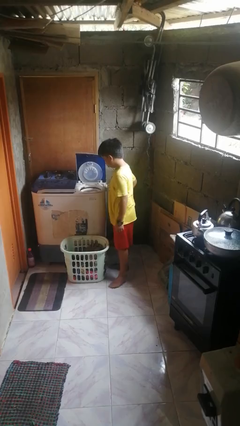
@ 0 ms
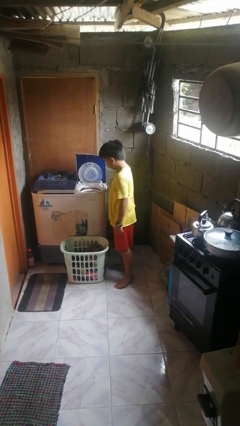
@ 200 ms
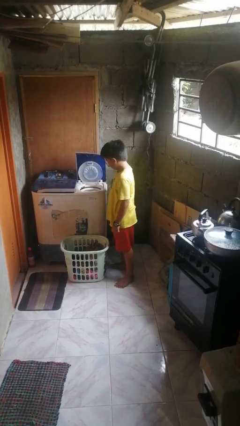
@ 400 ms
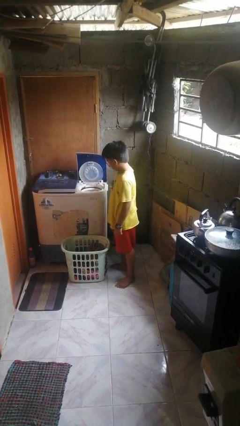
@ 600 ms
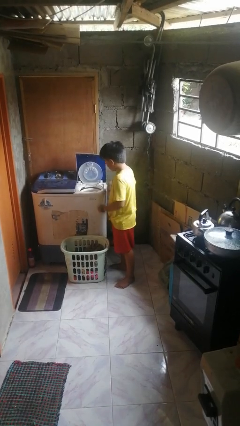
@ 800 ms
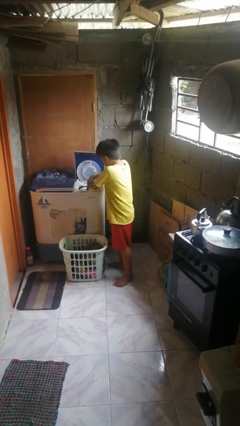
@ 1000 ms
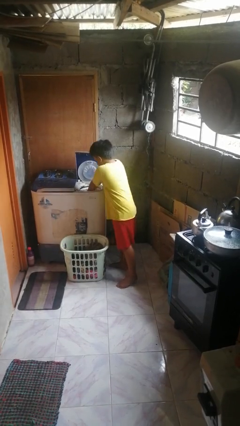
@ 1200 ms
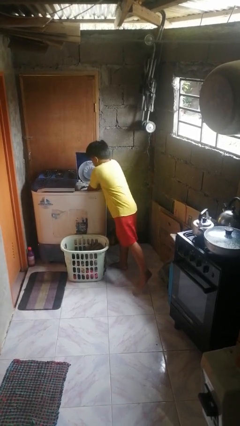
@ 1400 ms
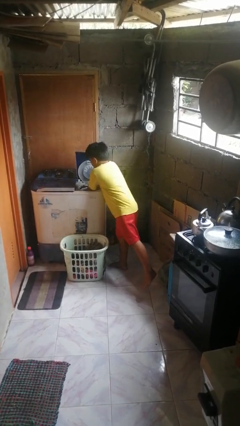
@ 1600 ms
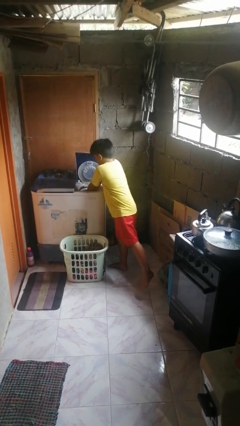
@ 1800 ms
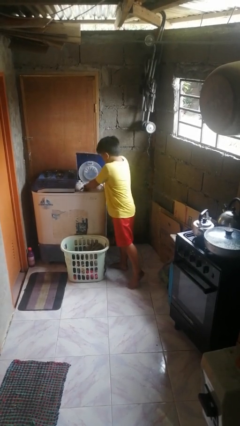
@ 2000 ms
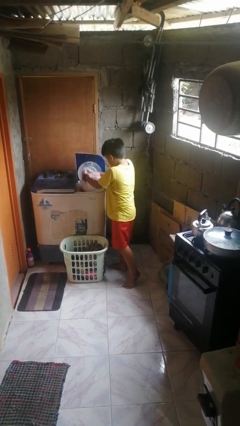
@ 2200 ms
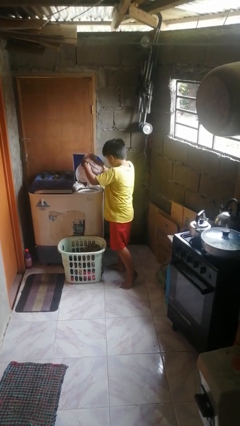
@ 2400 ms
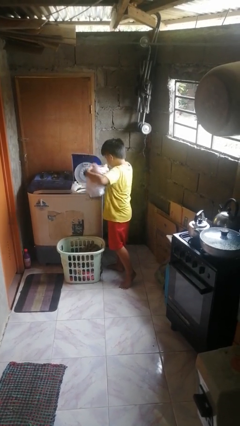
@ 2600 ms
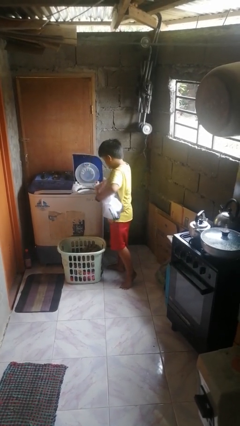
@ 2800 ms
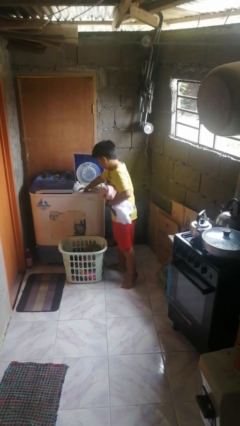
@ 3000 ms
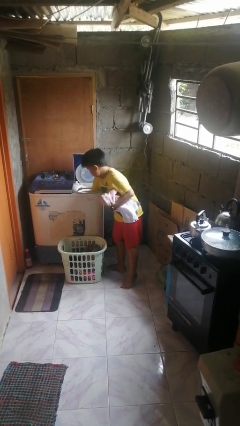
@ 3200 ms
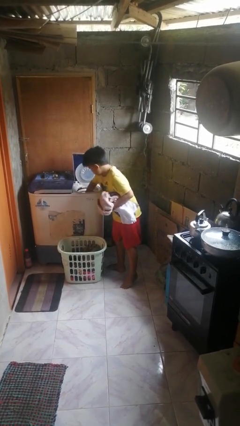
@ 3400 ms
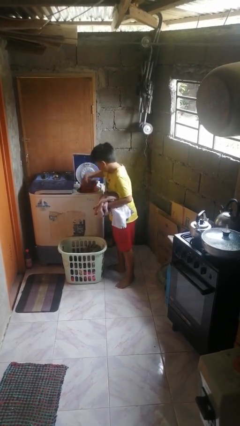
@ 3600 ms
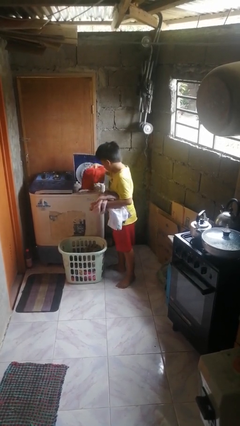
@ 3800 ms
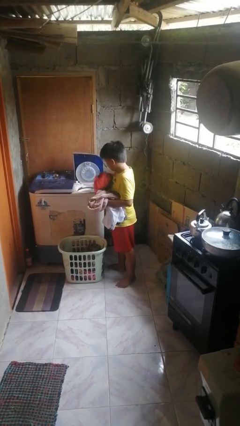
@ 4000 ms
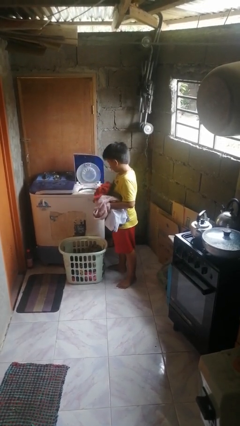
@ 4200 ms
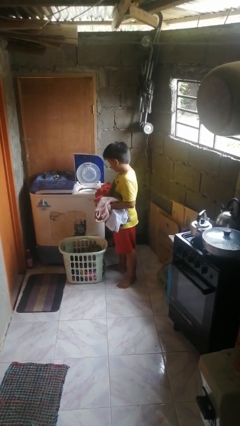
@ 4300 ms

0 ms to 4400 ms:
person unloads dryer

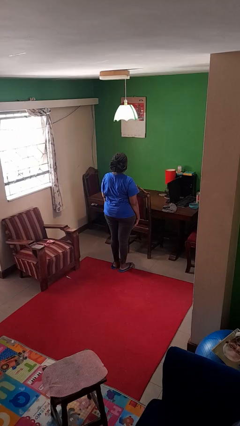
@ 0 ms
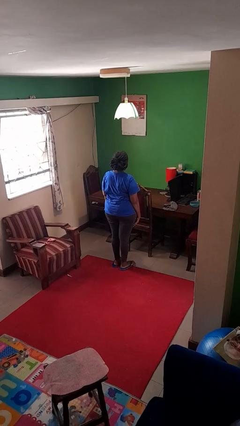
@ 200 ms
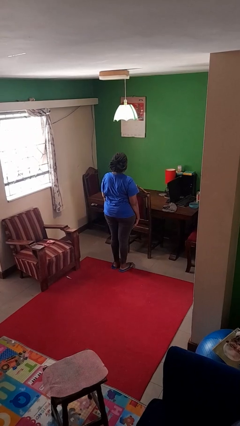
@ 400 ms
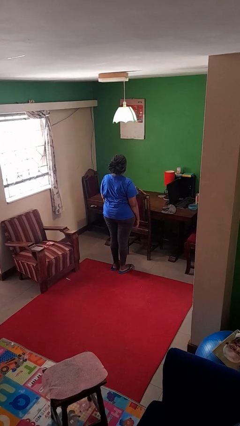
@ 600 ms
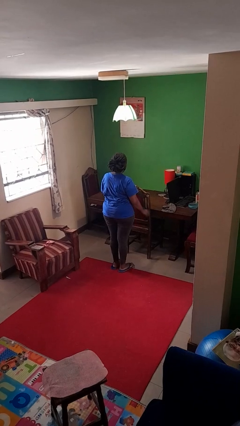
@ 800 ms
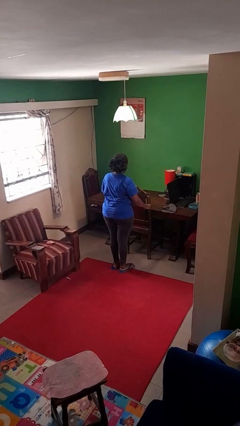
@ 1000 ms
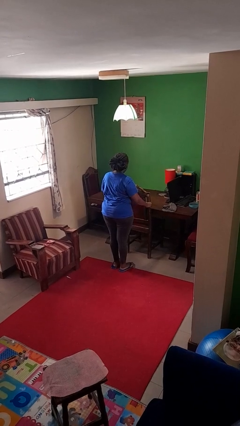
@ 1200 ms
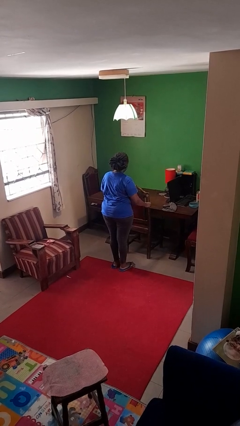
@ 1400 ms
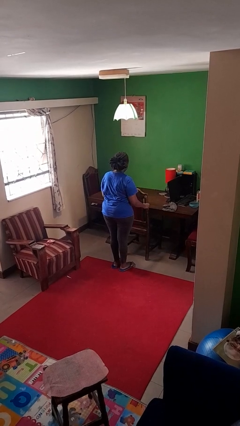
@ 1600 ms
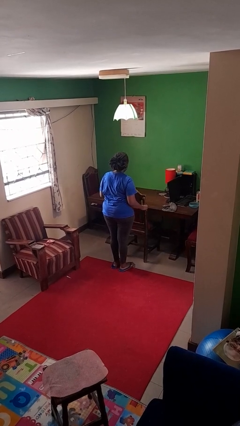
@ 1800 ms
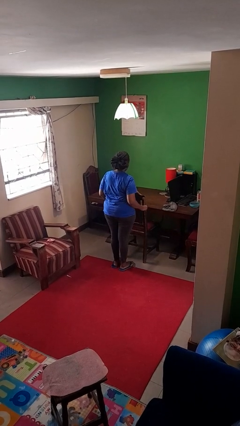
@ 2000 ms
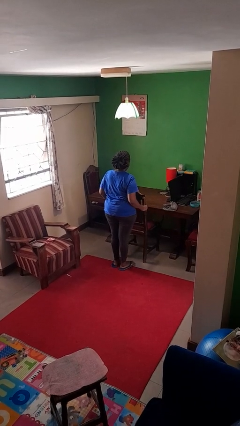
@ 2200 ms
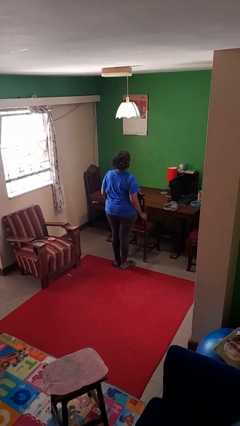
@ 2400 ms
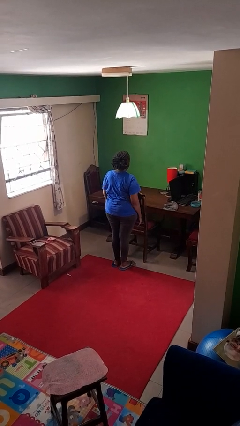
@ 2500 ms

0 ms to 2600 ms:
person pulls out chair

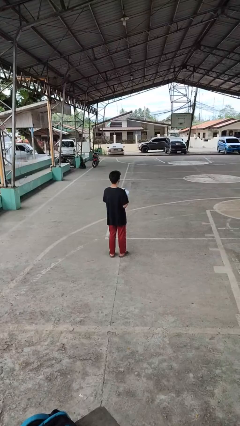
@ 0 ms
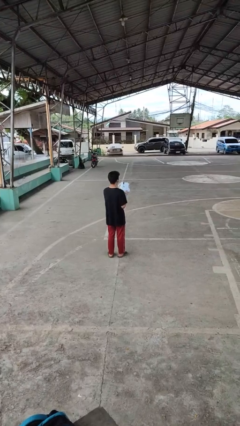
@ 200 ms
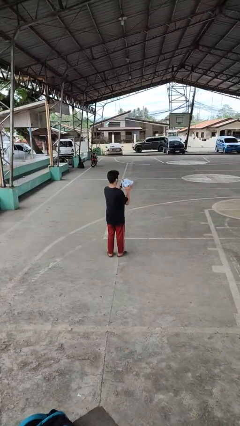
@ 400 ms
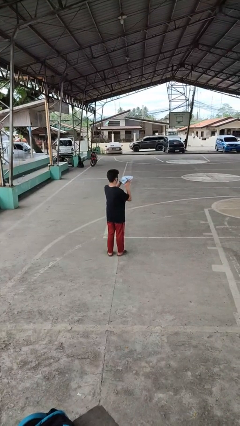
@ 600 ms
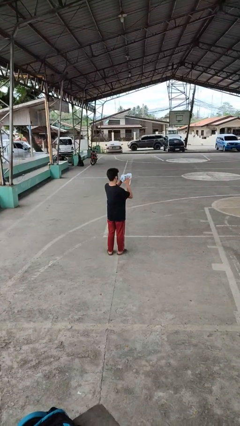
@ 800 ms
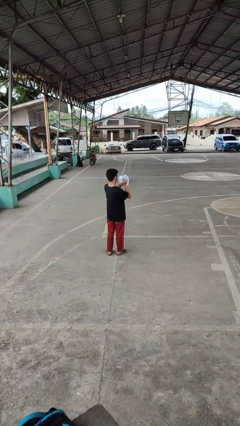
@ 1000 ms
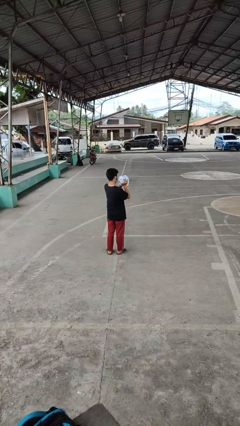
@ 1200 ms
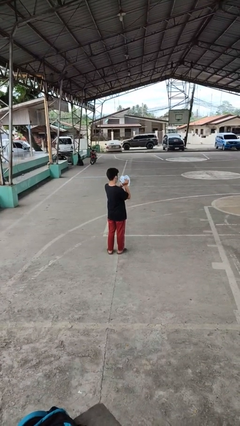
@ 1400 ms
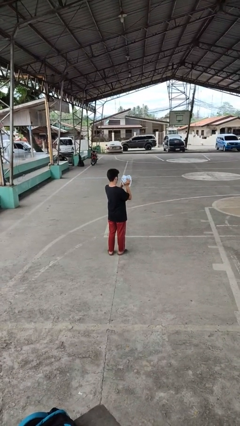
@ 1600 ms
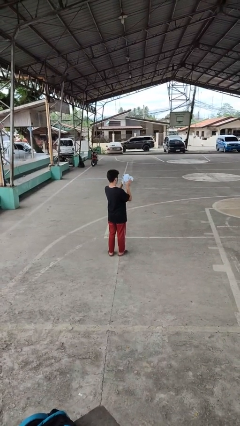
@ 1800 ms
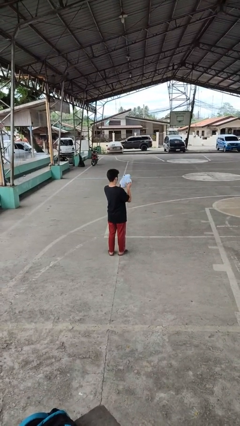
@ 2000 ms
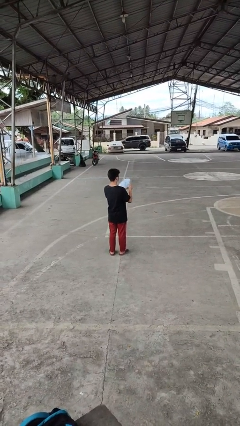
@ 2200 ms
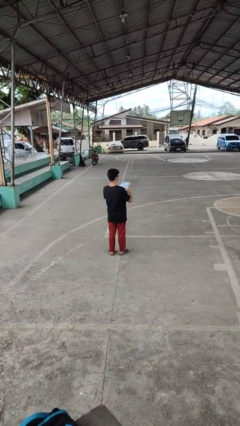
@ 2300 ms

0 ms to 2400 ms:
person squeezes object

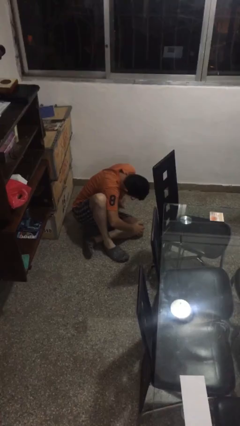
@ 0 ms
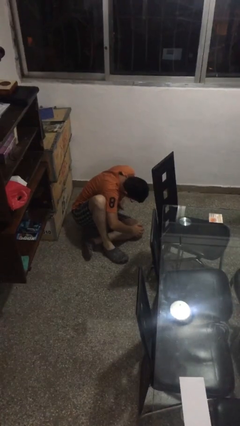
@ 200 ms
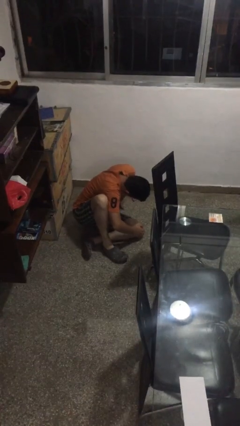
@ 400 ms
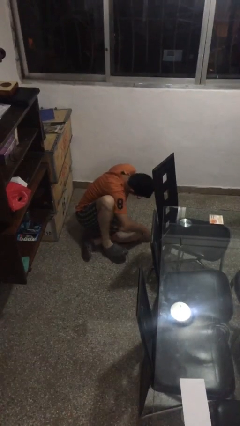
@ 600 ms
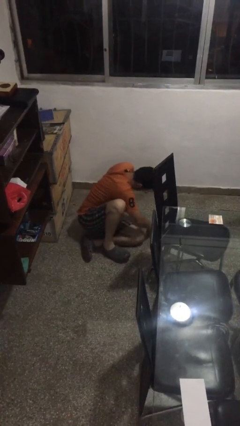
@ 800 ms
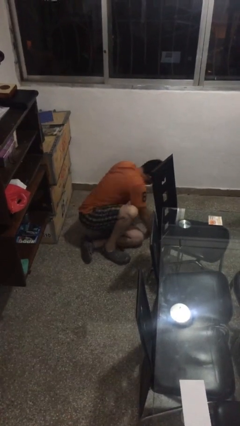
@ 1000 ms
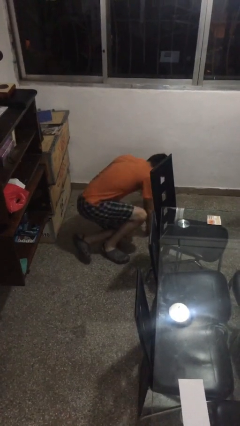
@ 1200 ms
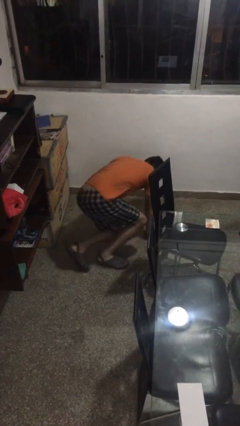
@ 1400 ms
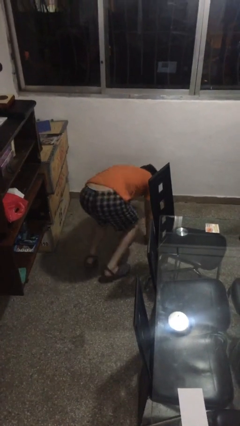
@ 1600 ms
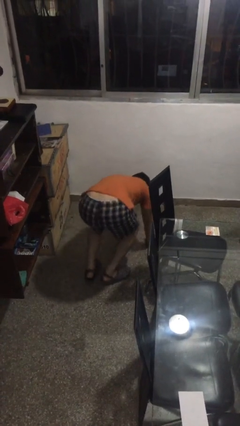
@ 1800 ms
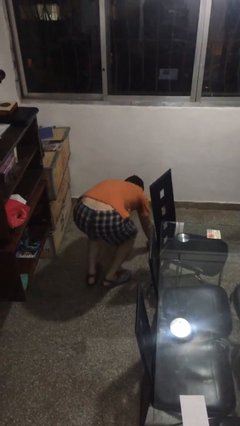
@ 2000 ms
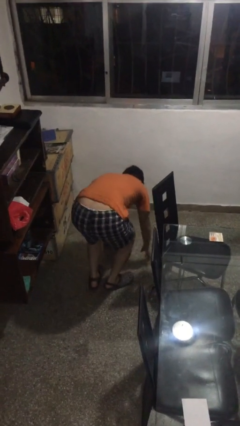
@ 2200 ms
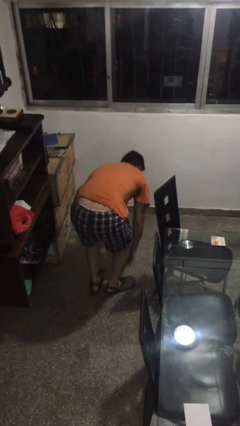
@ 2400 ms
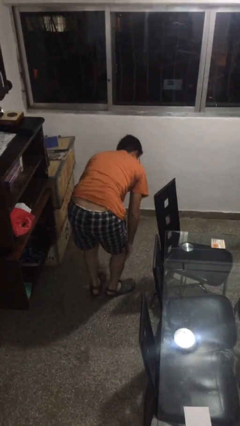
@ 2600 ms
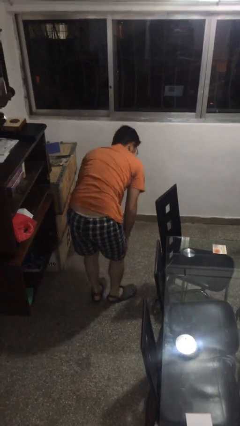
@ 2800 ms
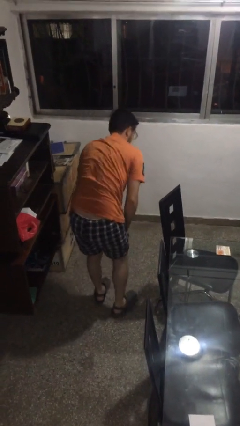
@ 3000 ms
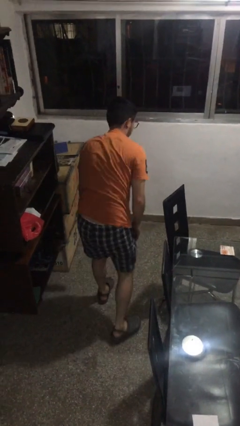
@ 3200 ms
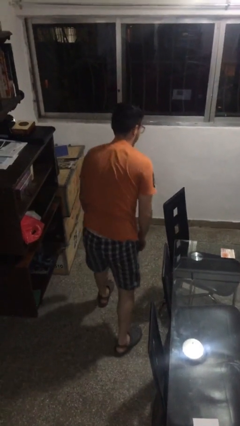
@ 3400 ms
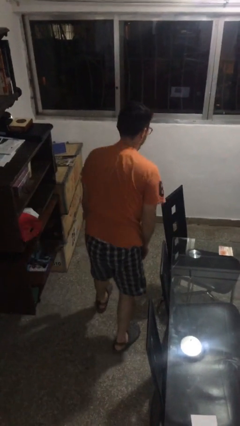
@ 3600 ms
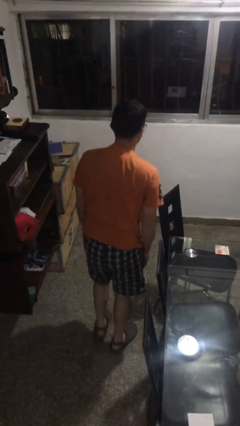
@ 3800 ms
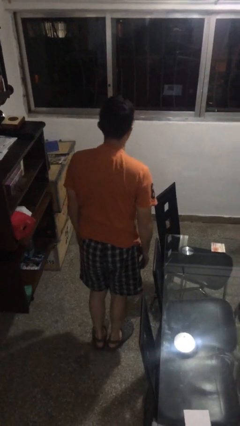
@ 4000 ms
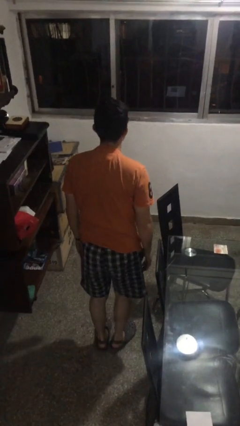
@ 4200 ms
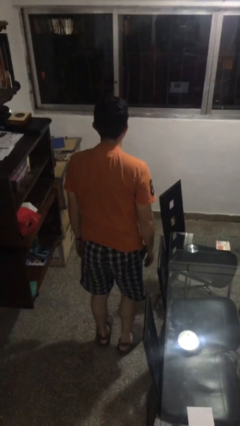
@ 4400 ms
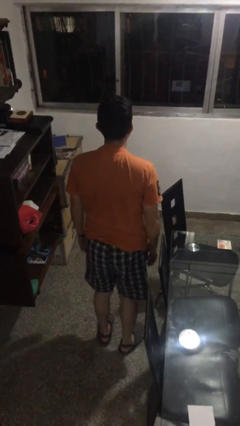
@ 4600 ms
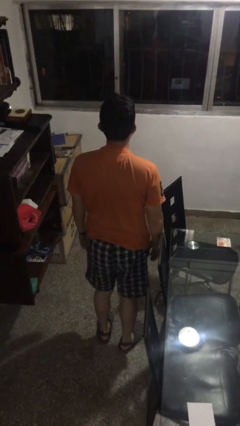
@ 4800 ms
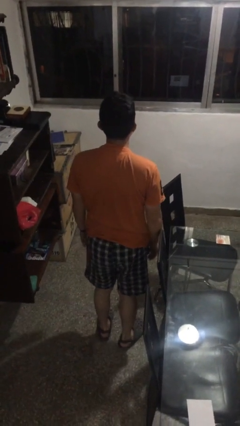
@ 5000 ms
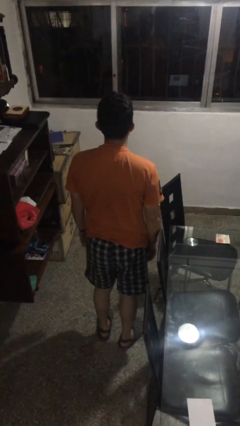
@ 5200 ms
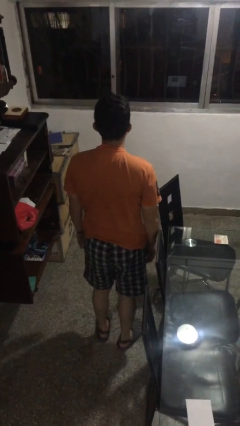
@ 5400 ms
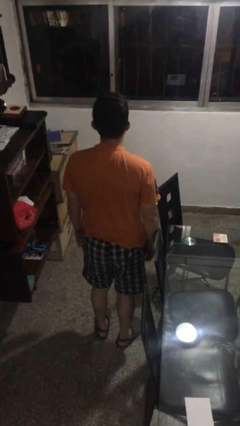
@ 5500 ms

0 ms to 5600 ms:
person stands up from floor

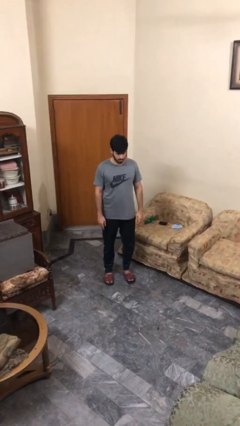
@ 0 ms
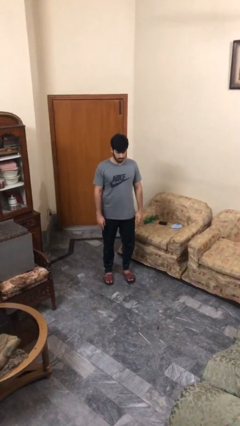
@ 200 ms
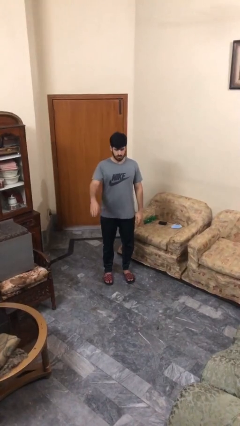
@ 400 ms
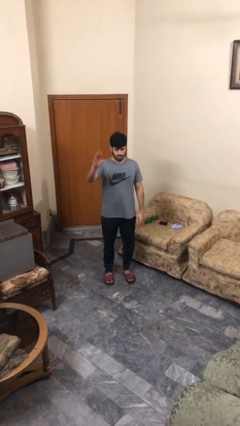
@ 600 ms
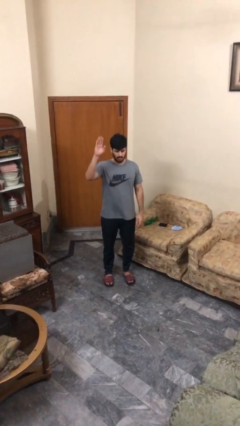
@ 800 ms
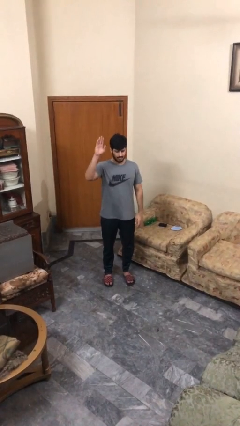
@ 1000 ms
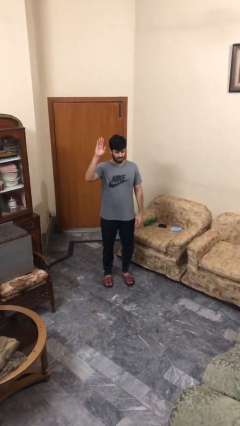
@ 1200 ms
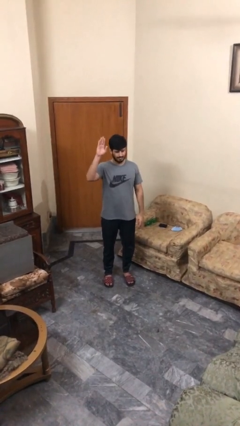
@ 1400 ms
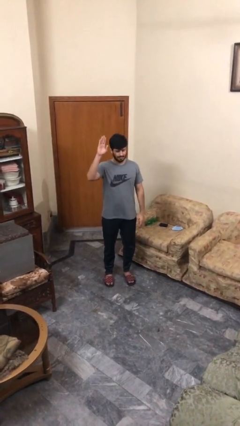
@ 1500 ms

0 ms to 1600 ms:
person gestures raise hand

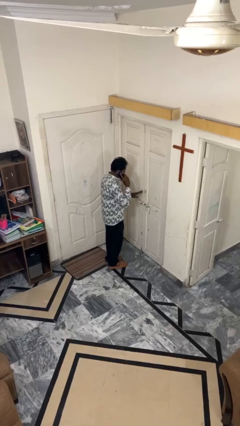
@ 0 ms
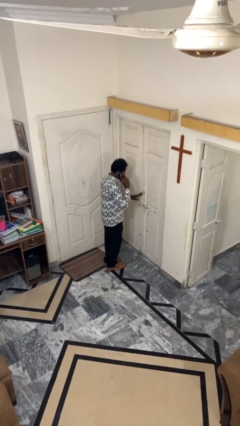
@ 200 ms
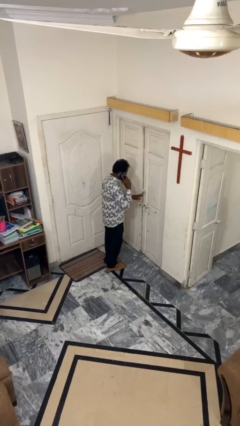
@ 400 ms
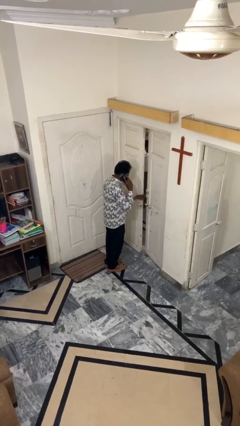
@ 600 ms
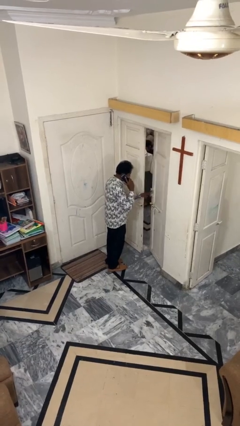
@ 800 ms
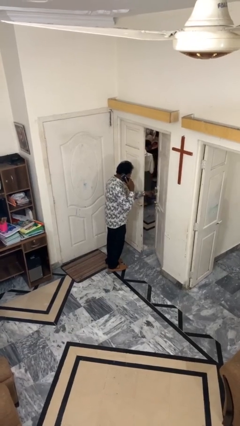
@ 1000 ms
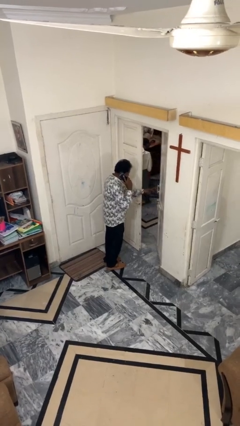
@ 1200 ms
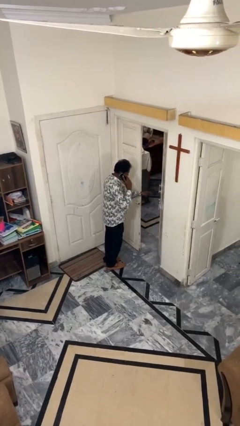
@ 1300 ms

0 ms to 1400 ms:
person opens facility door
